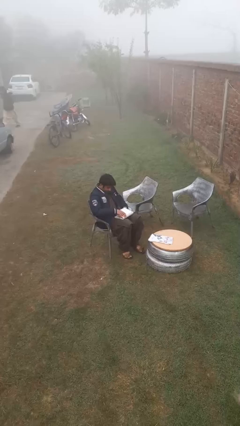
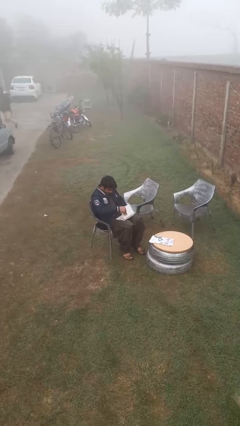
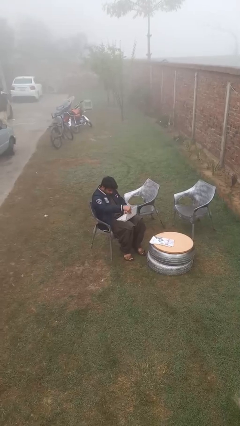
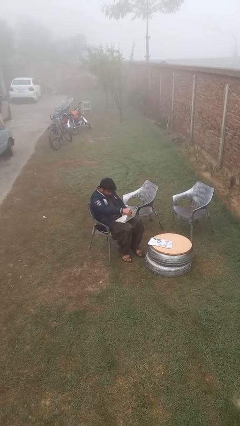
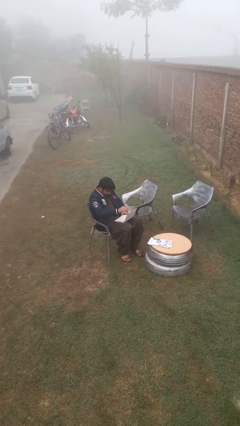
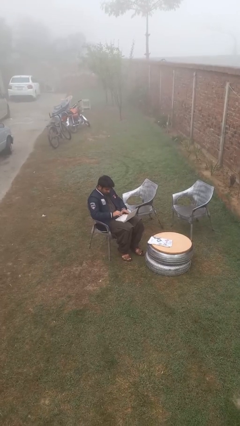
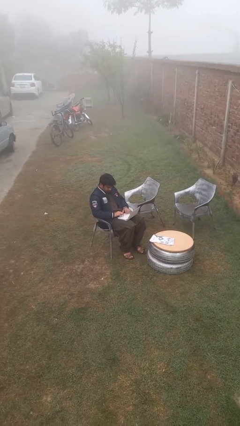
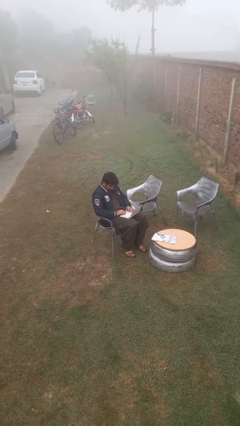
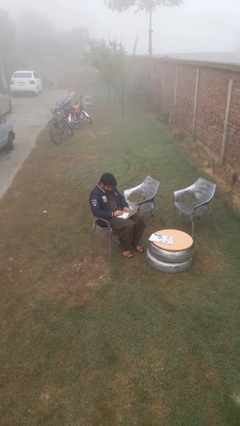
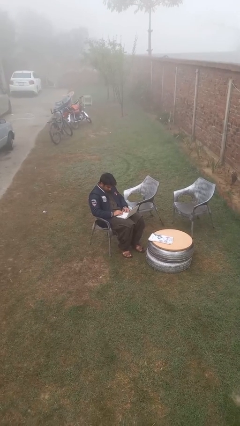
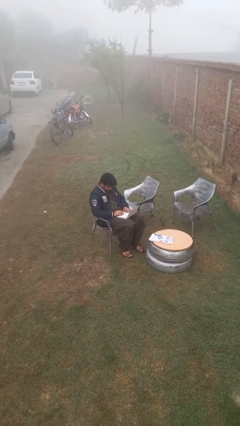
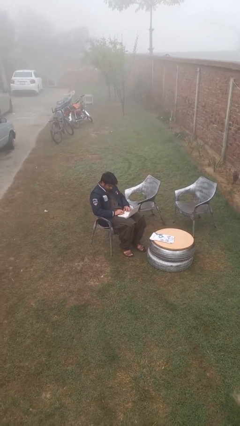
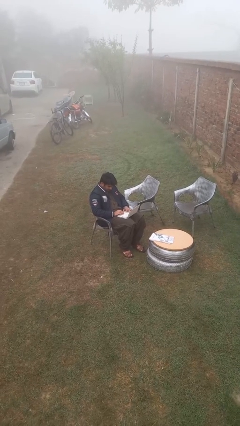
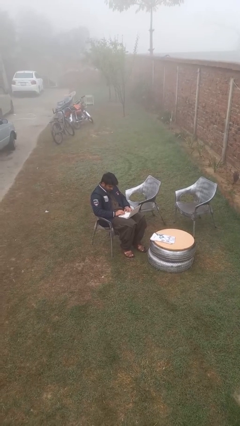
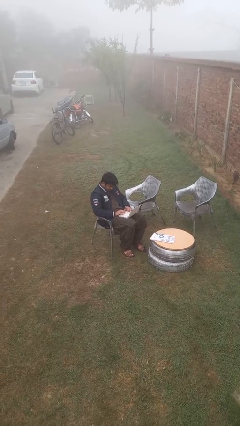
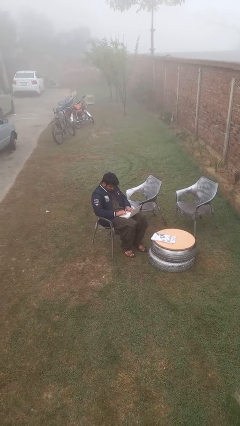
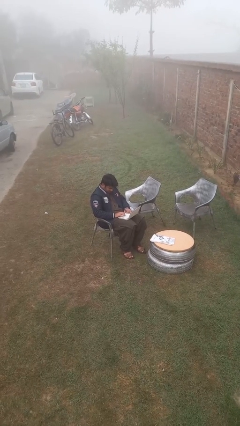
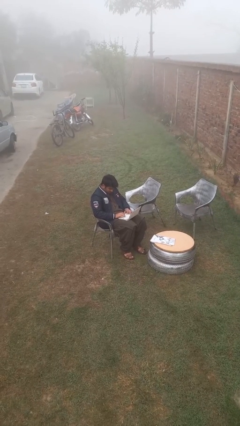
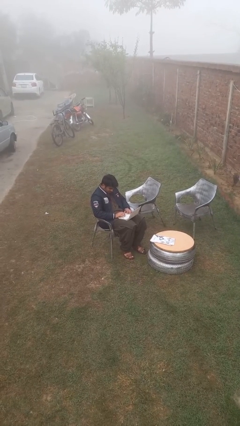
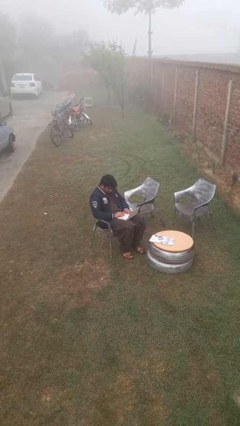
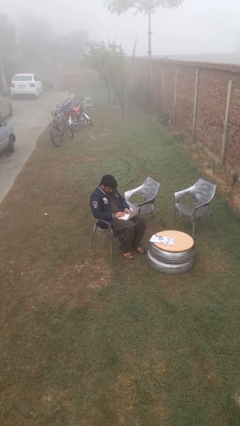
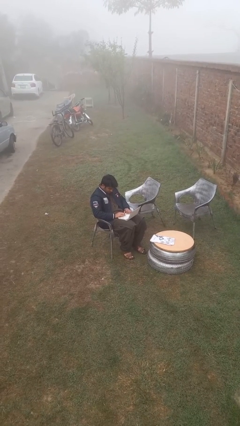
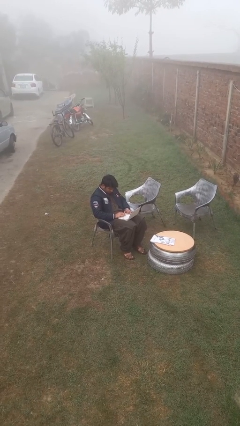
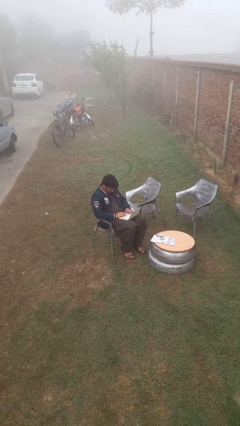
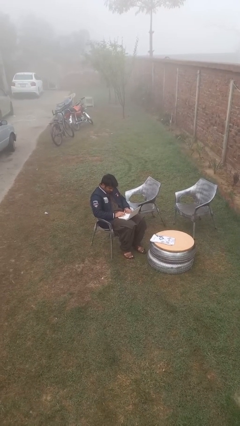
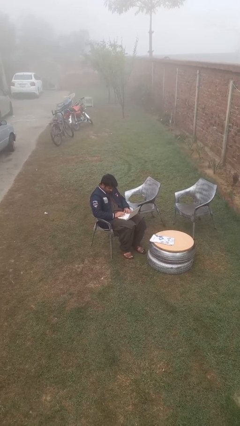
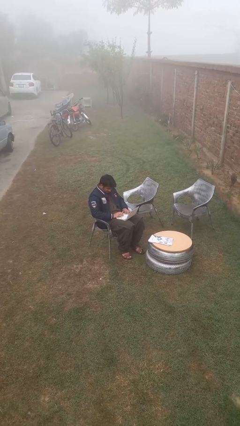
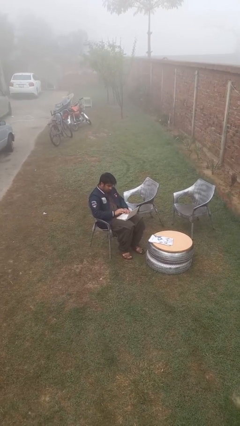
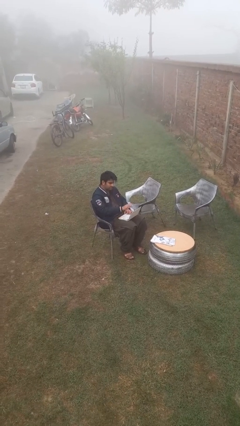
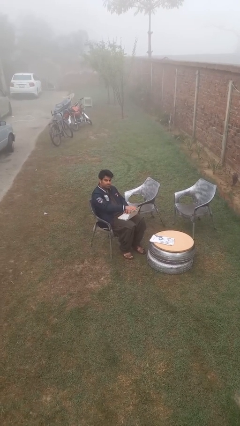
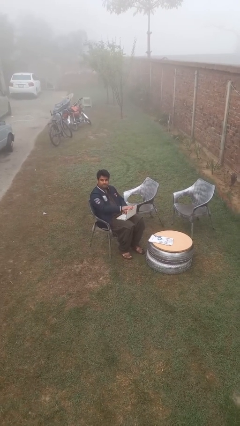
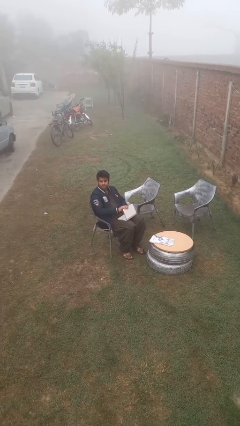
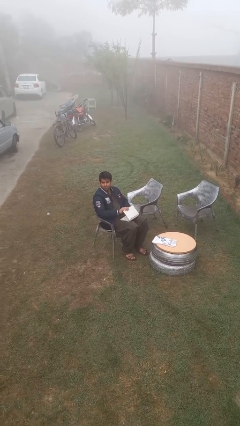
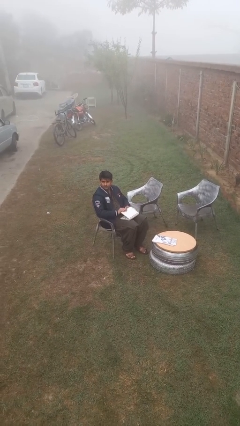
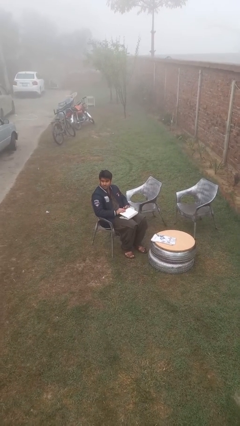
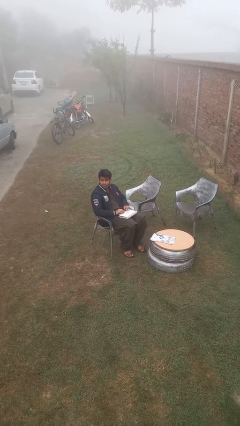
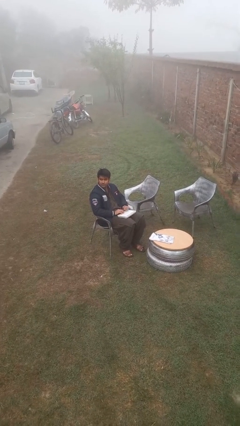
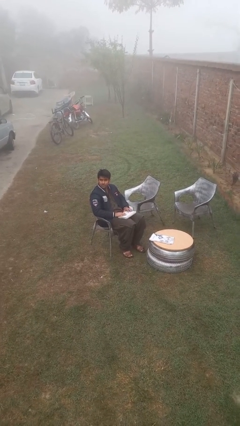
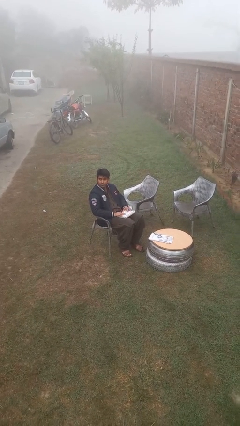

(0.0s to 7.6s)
person interacts with laptop

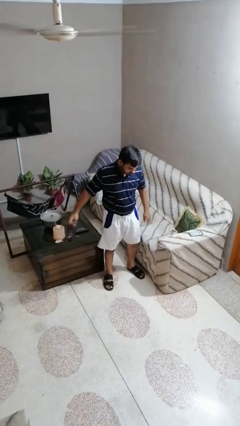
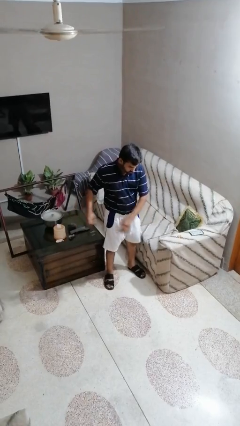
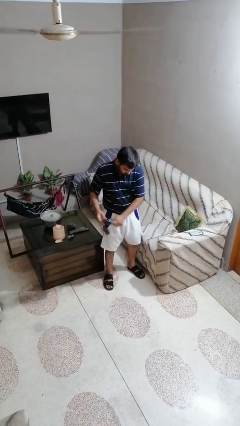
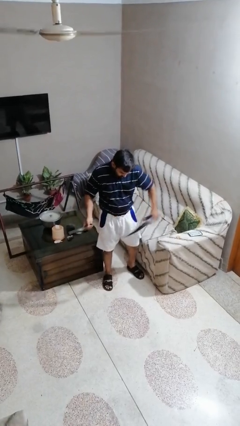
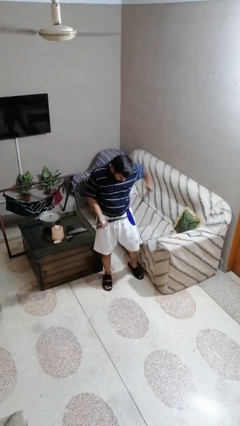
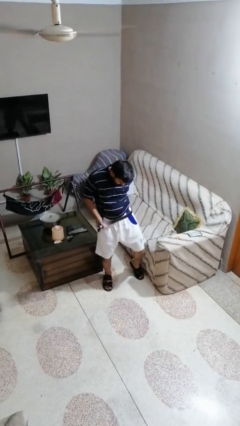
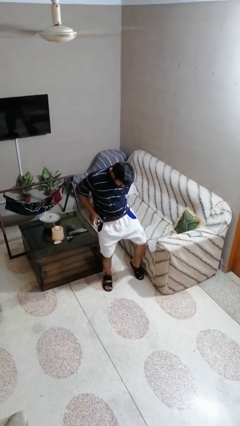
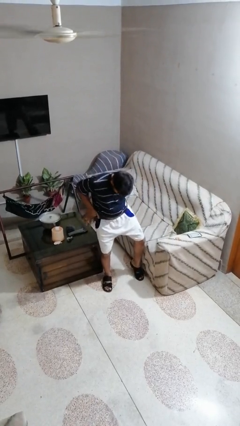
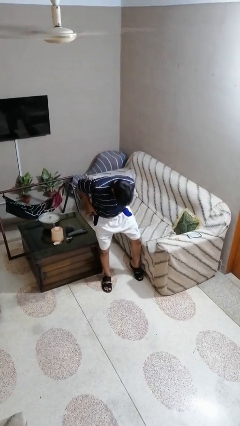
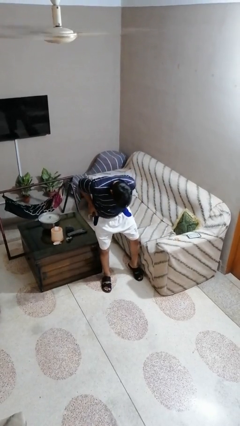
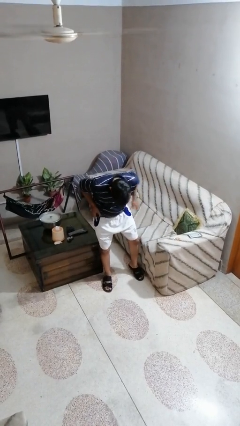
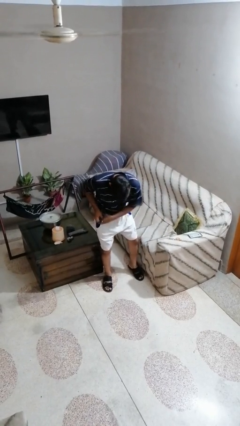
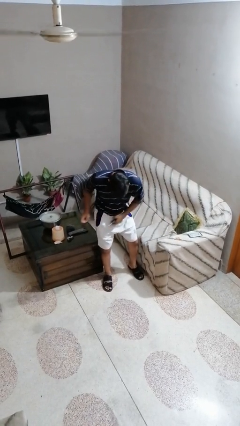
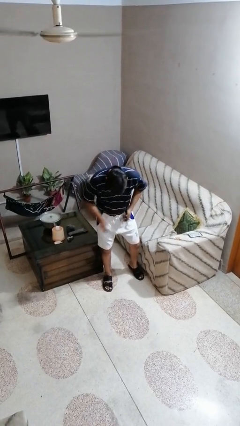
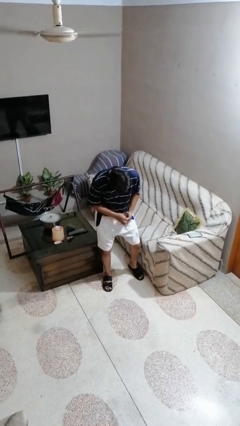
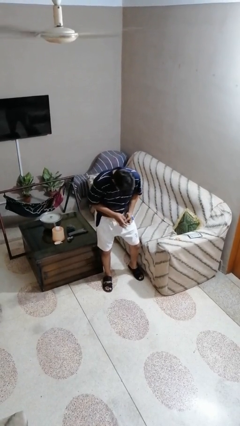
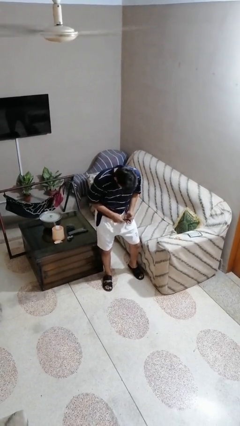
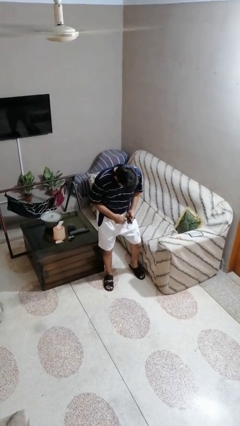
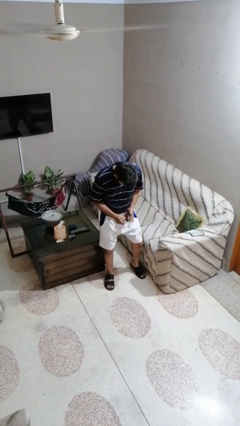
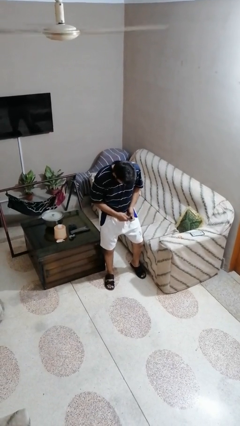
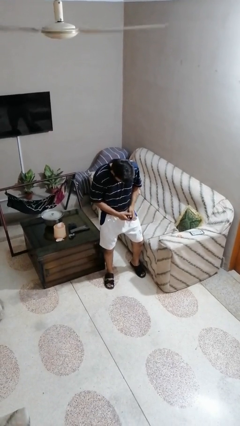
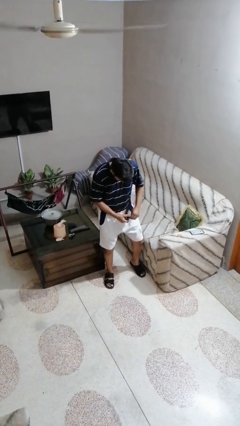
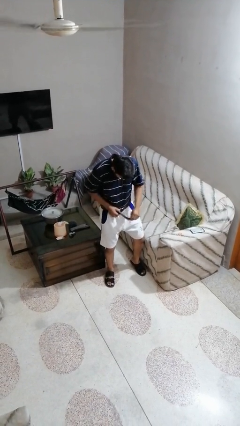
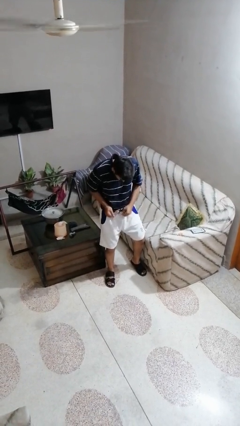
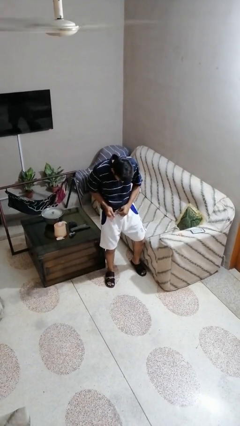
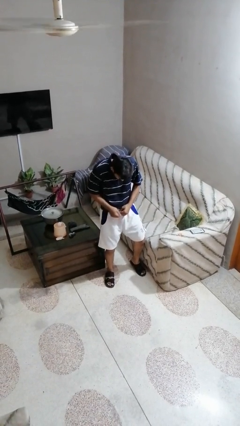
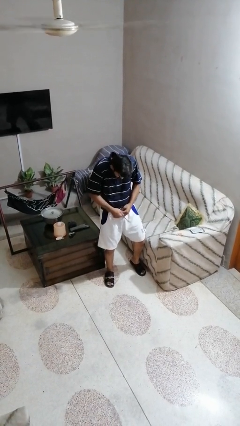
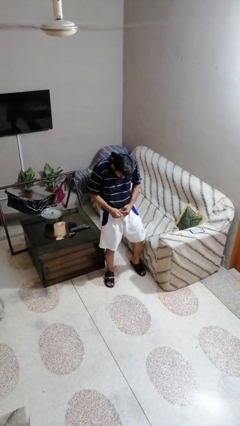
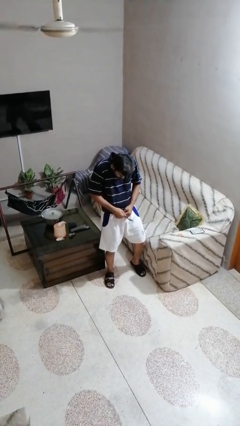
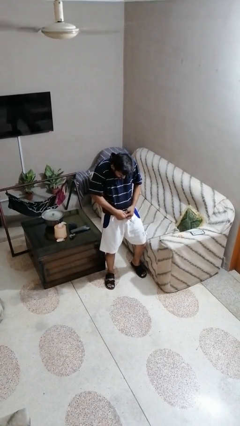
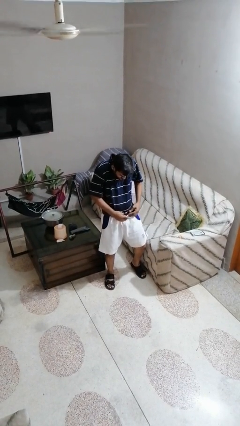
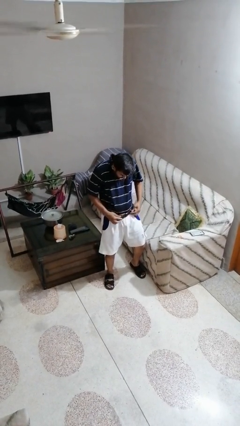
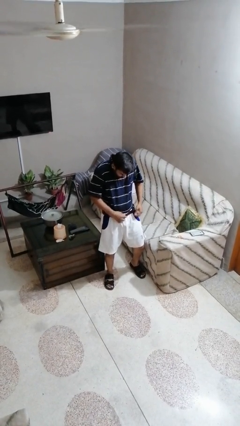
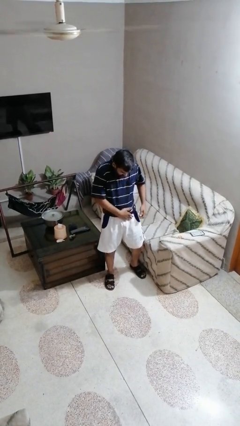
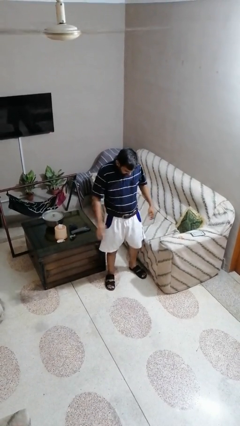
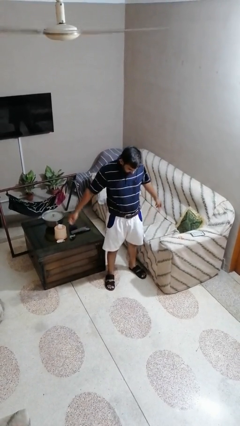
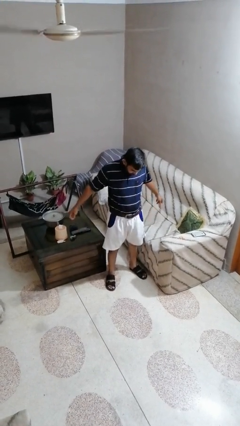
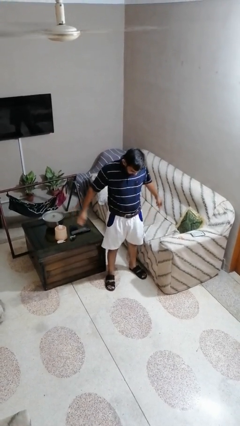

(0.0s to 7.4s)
person puts on belt

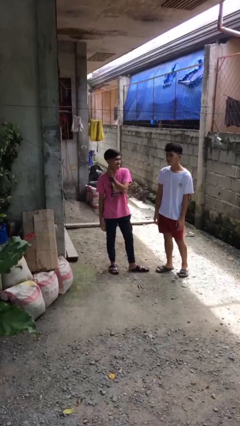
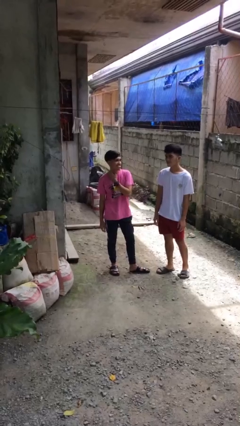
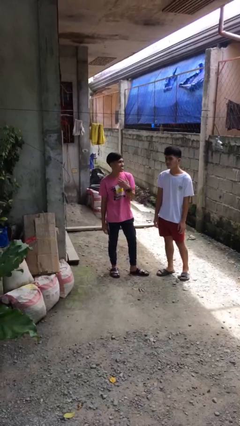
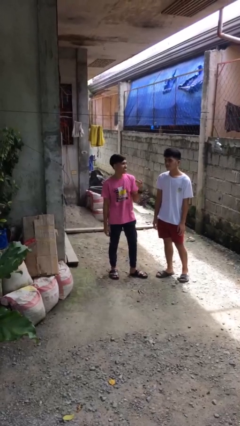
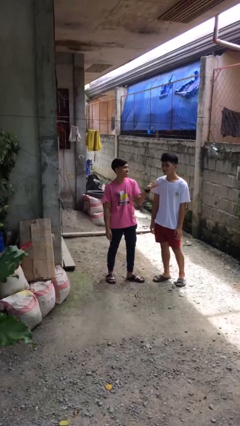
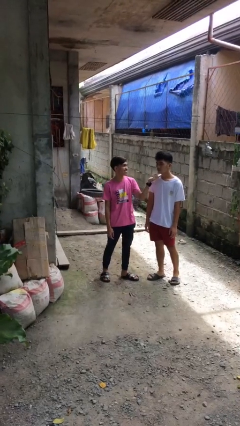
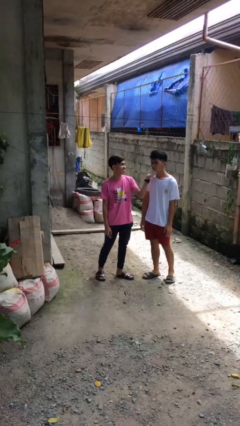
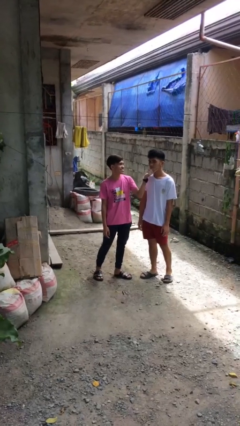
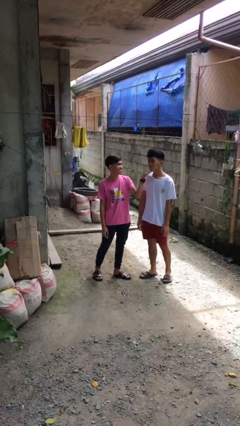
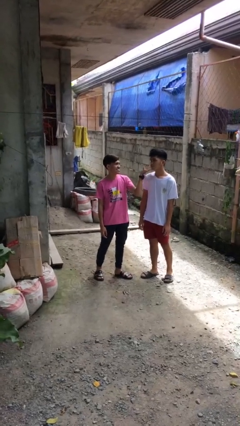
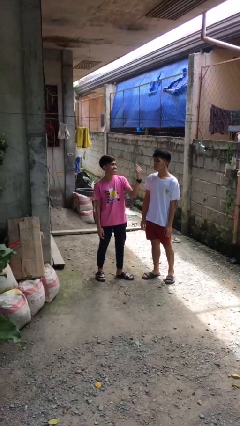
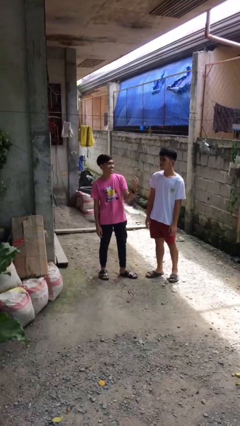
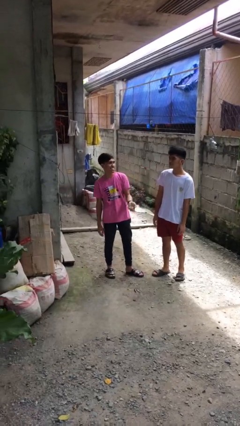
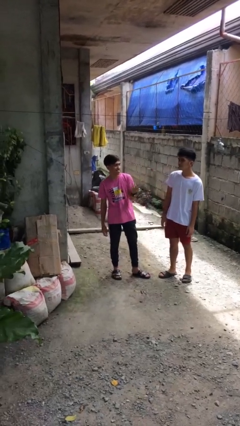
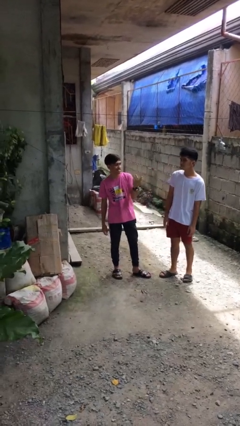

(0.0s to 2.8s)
person touches face of person

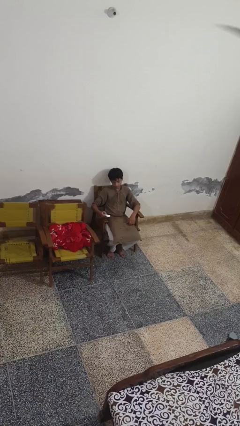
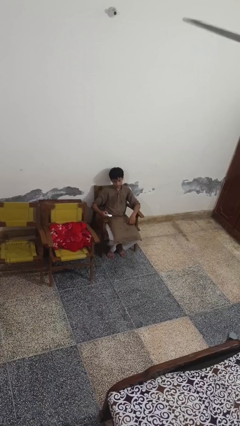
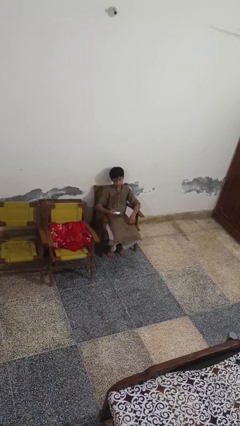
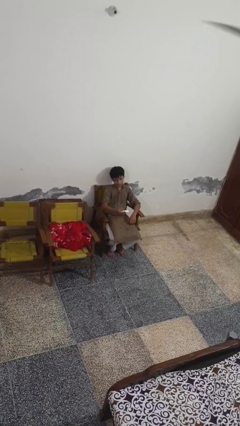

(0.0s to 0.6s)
person uses television remote
